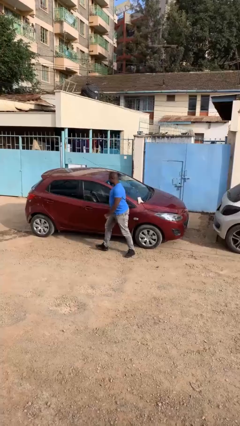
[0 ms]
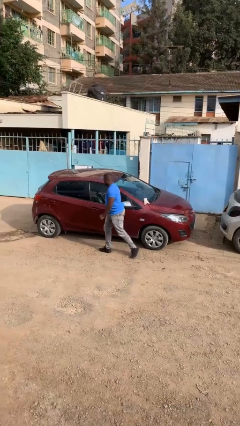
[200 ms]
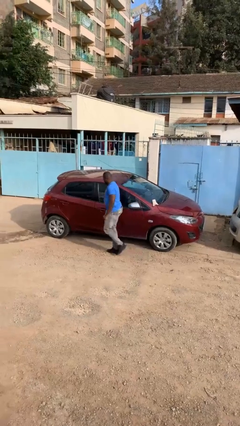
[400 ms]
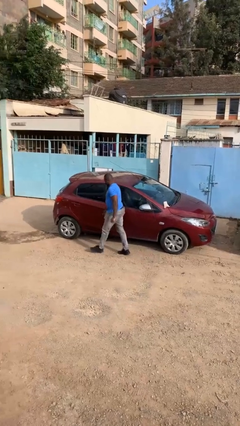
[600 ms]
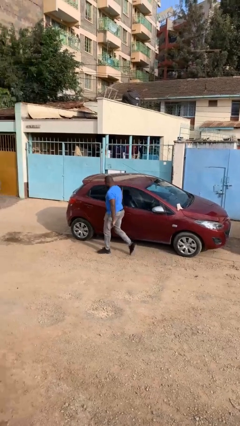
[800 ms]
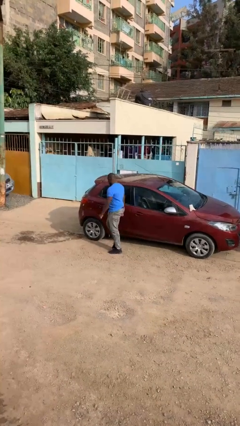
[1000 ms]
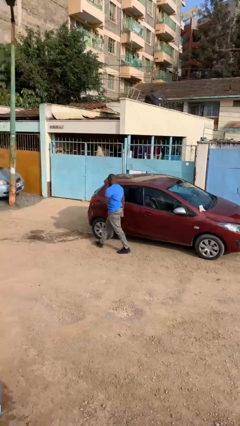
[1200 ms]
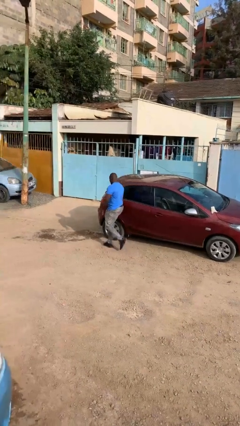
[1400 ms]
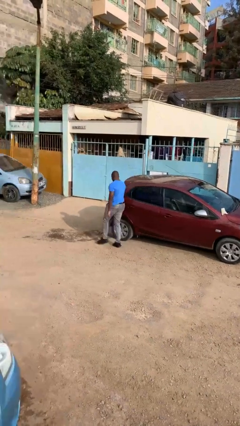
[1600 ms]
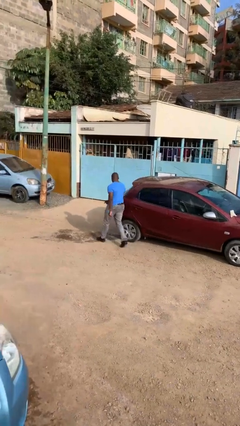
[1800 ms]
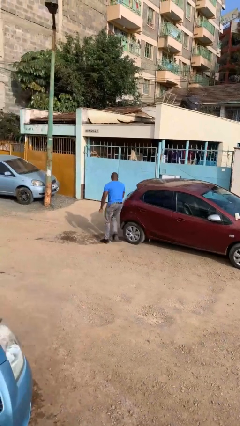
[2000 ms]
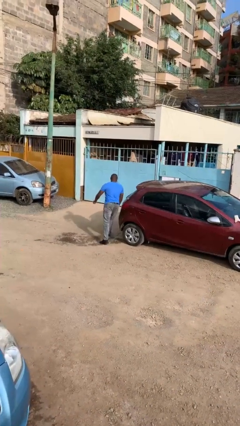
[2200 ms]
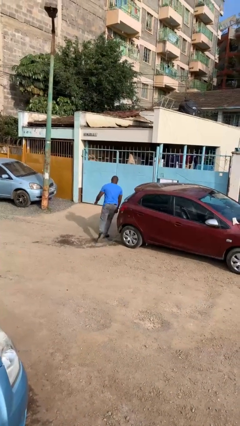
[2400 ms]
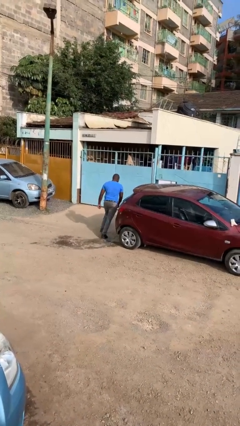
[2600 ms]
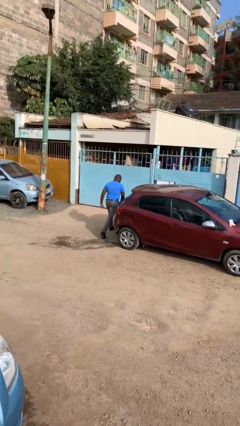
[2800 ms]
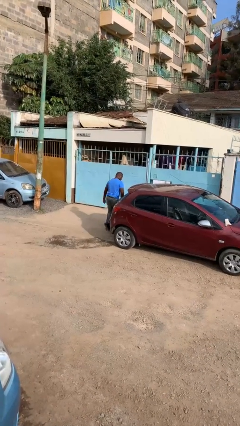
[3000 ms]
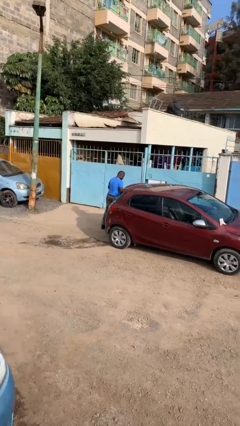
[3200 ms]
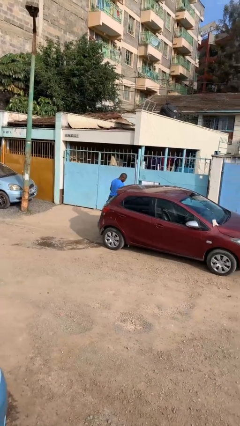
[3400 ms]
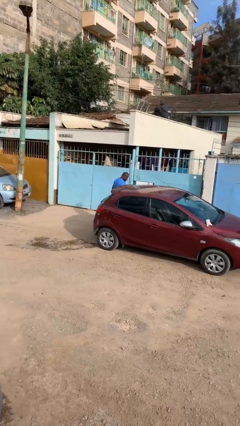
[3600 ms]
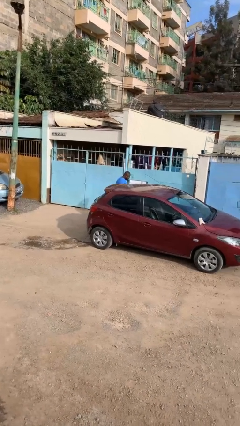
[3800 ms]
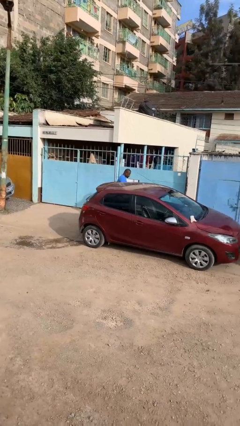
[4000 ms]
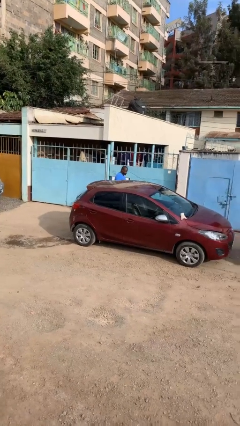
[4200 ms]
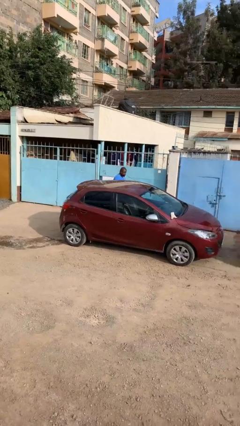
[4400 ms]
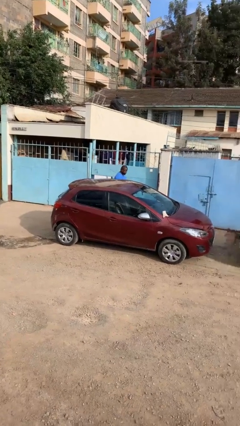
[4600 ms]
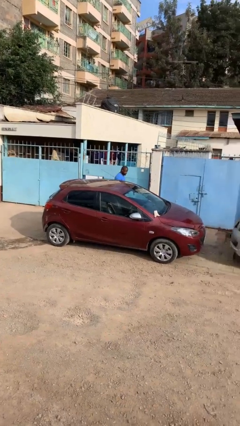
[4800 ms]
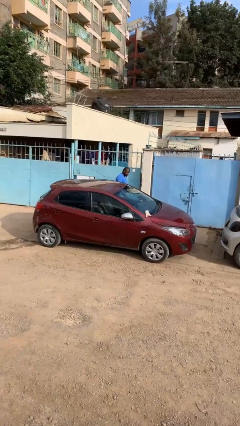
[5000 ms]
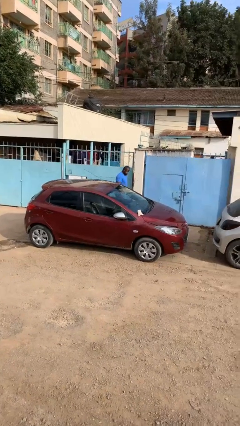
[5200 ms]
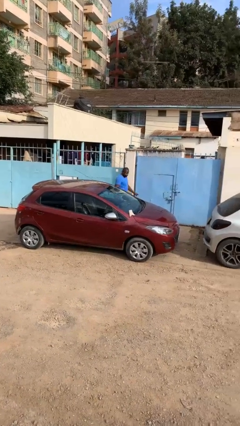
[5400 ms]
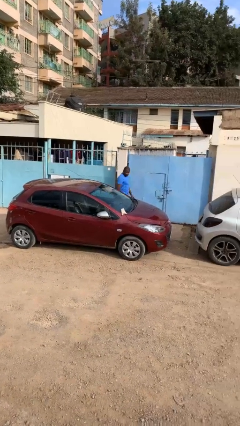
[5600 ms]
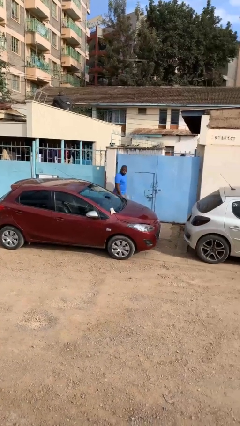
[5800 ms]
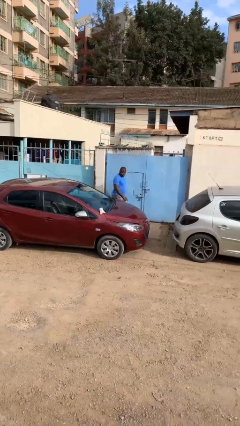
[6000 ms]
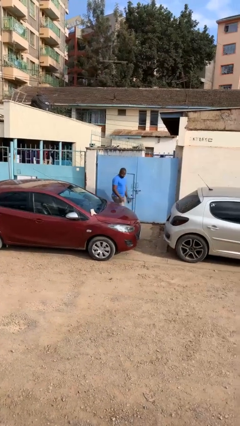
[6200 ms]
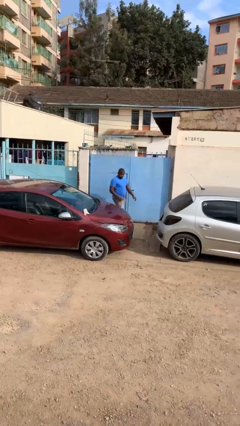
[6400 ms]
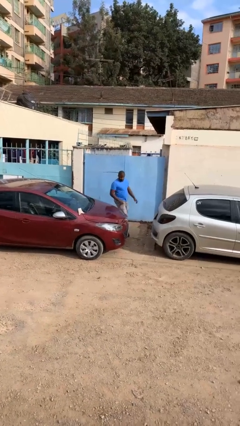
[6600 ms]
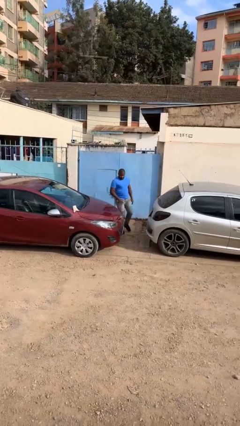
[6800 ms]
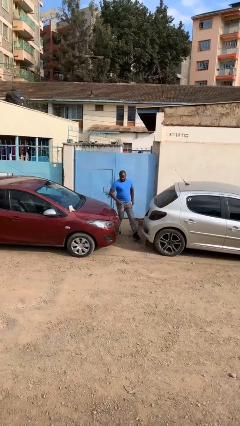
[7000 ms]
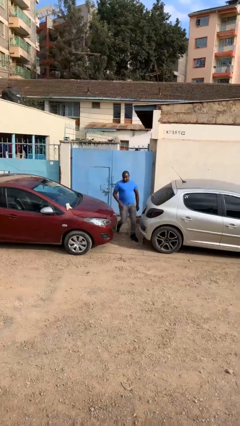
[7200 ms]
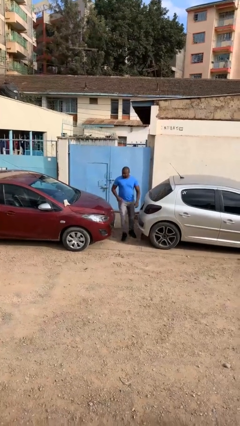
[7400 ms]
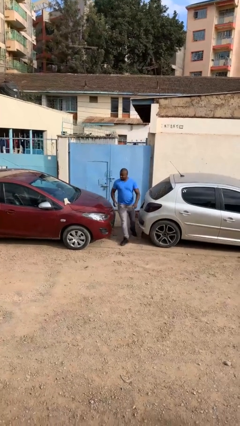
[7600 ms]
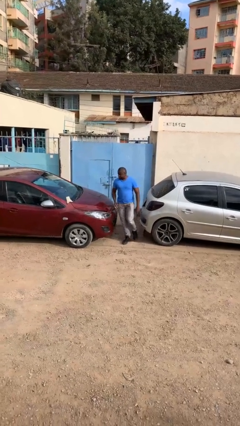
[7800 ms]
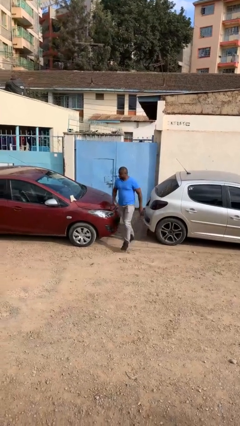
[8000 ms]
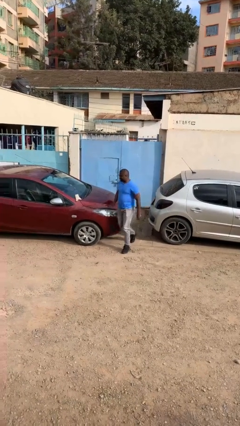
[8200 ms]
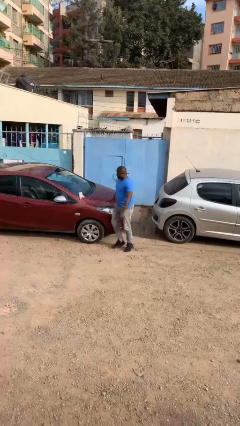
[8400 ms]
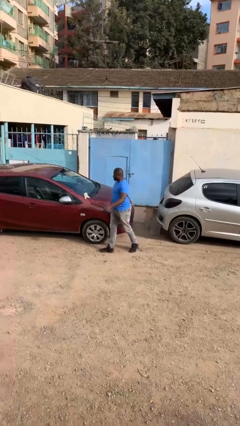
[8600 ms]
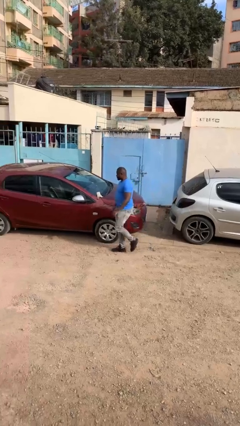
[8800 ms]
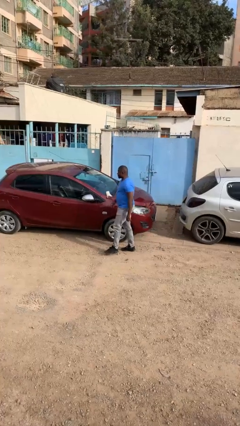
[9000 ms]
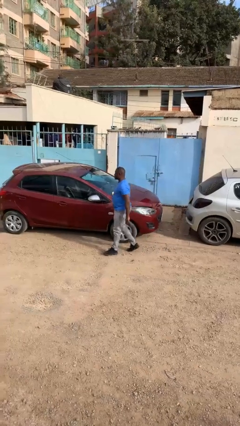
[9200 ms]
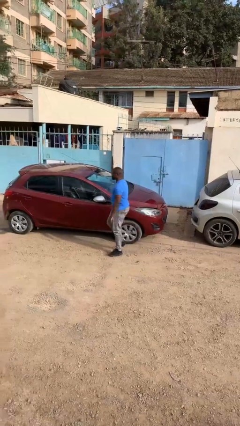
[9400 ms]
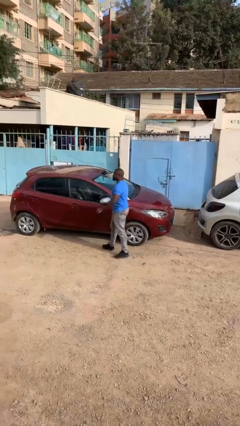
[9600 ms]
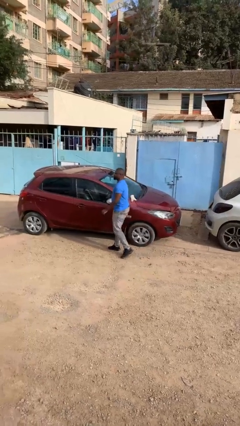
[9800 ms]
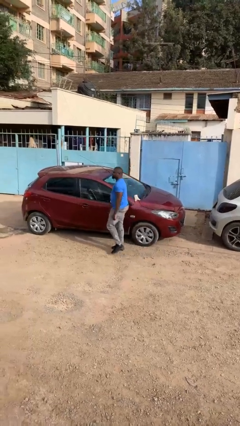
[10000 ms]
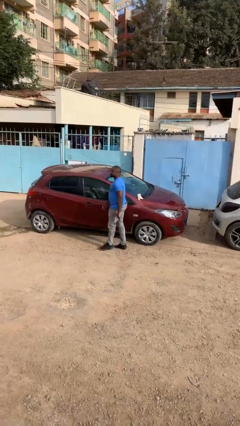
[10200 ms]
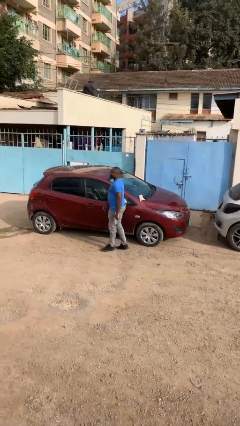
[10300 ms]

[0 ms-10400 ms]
person walks around car

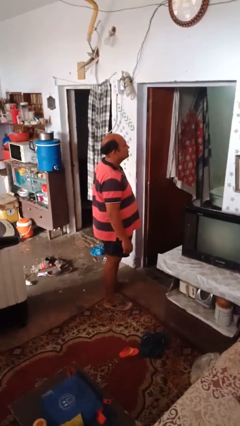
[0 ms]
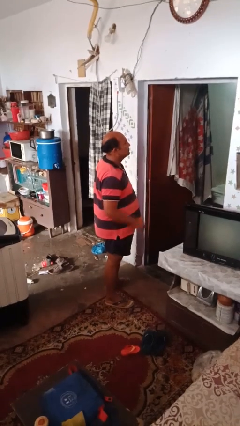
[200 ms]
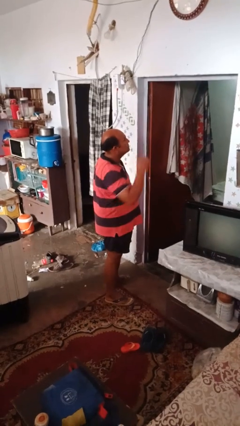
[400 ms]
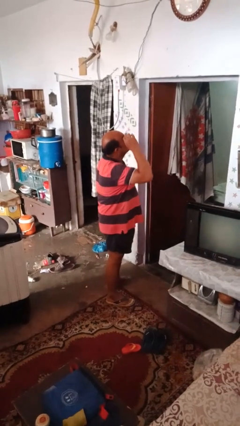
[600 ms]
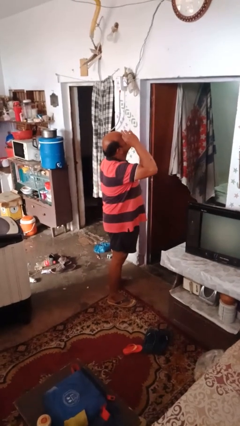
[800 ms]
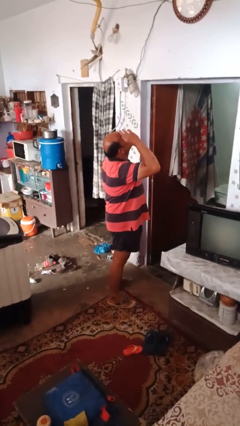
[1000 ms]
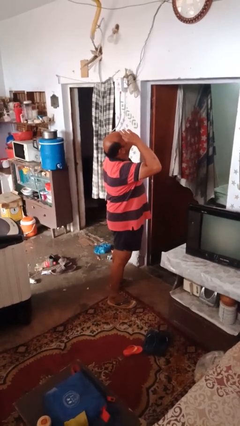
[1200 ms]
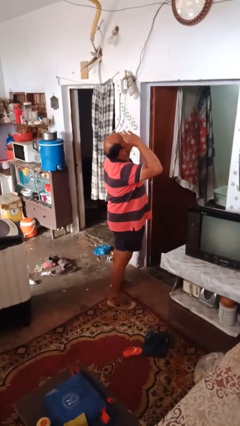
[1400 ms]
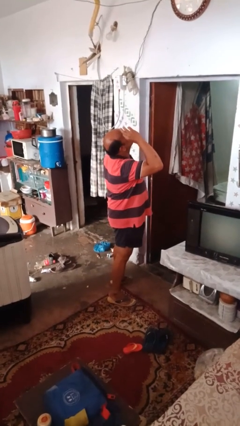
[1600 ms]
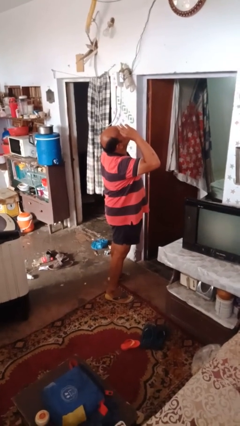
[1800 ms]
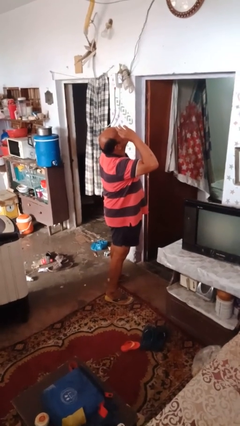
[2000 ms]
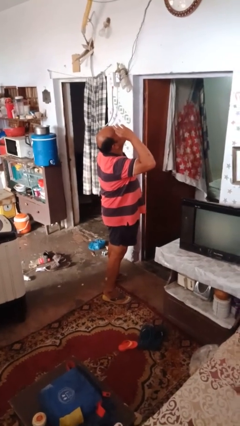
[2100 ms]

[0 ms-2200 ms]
person gestures watch closely

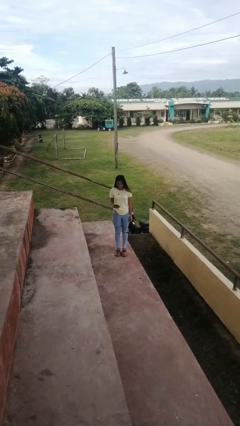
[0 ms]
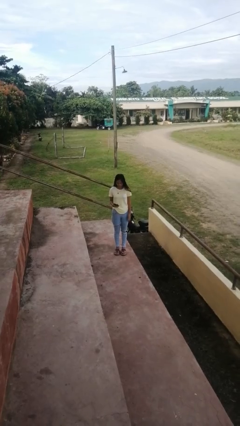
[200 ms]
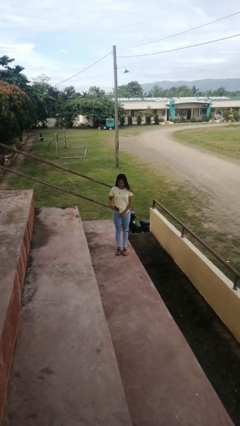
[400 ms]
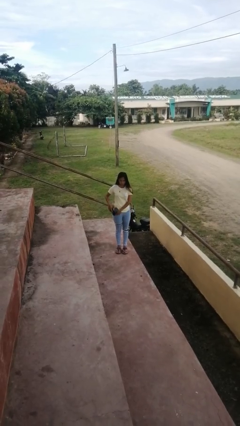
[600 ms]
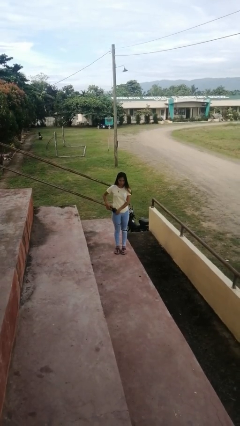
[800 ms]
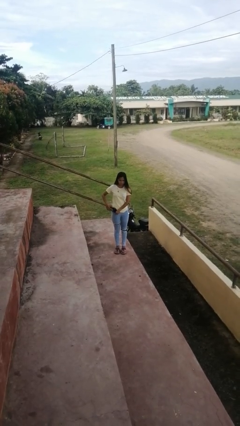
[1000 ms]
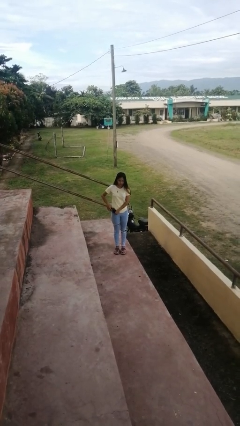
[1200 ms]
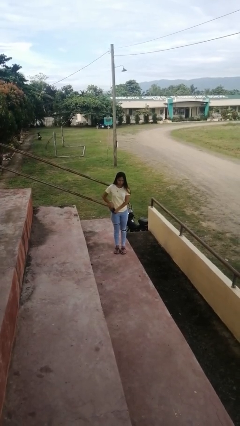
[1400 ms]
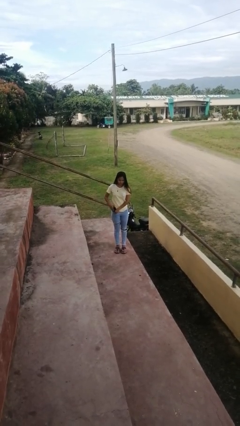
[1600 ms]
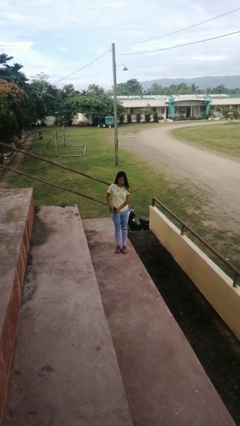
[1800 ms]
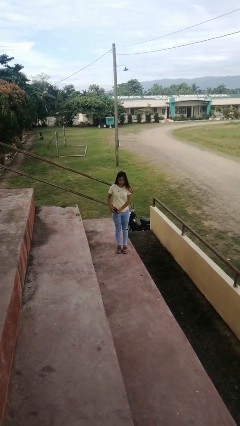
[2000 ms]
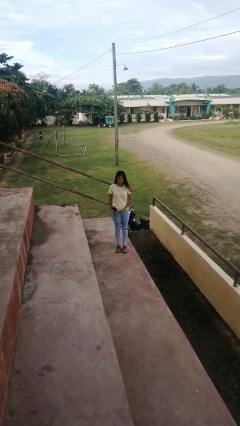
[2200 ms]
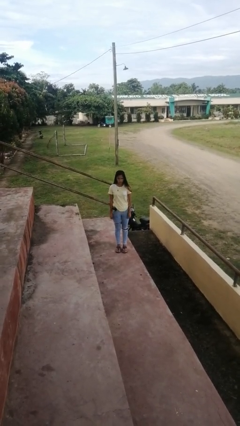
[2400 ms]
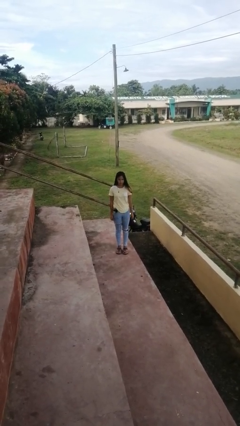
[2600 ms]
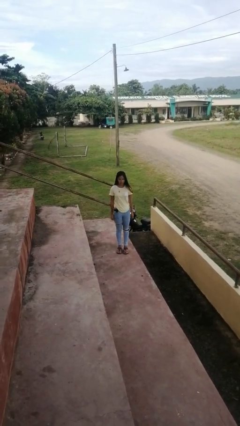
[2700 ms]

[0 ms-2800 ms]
person puts phone into pocket

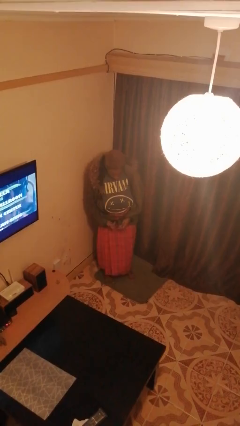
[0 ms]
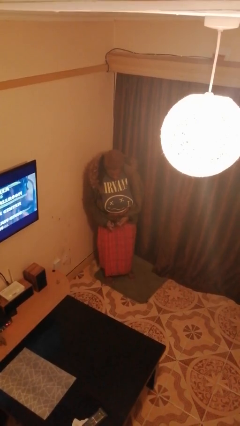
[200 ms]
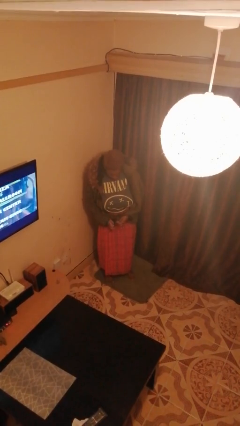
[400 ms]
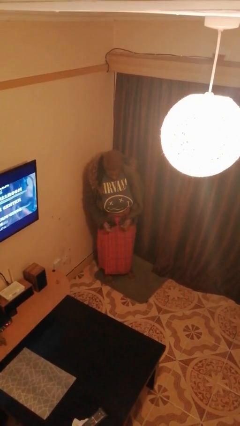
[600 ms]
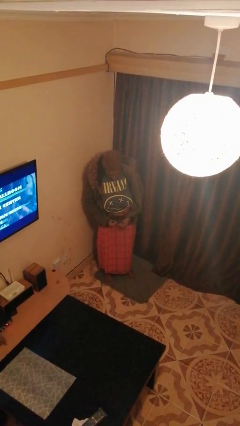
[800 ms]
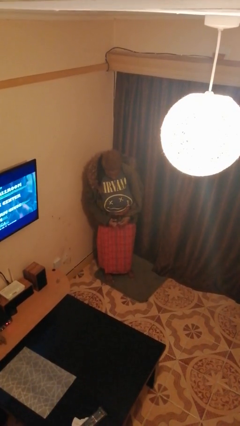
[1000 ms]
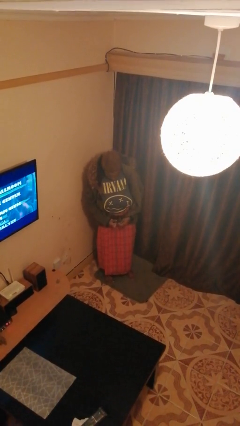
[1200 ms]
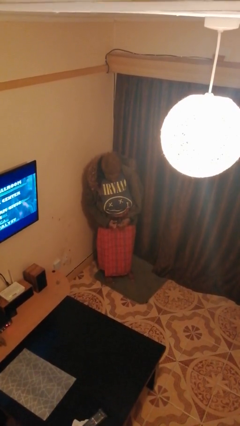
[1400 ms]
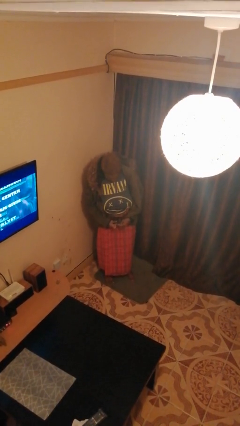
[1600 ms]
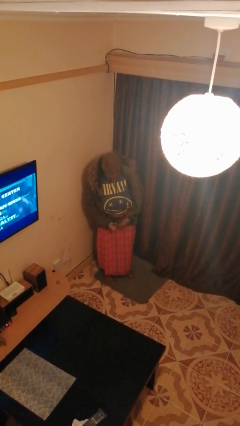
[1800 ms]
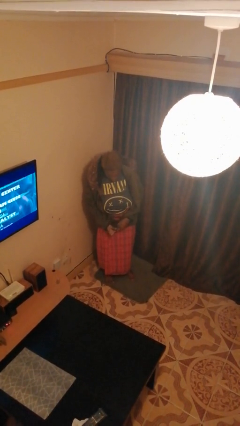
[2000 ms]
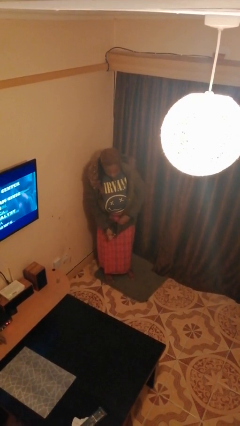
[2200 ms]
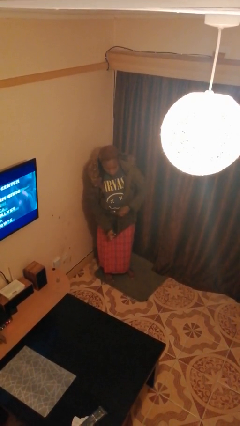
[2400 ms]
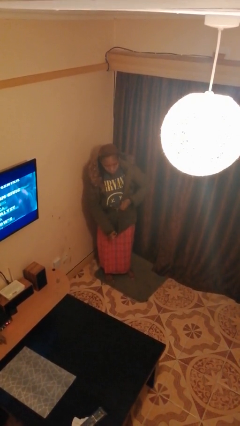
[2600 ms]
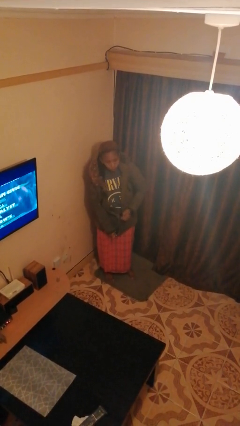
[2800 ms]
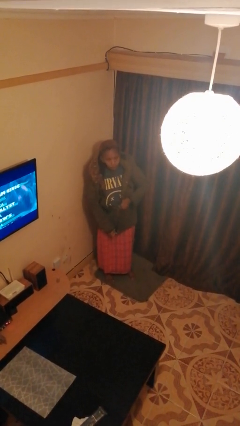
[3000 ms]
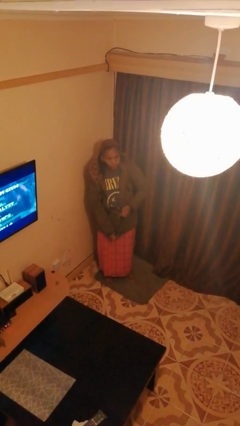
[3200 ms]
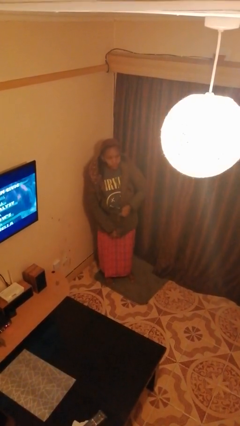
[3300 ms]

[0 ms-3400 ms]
person zips up jacket
